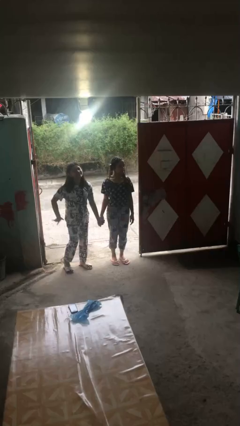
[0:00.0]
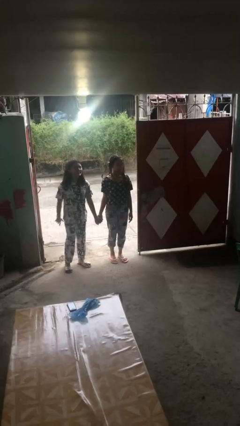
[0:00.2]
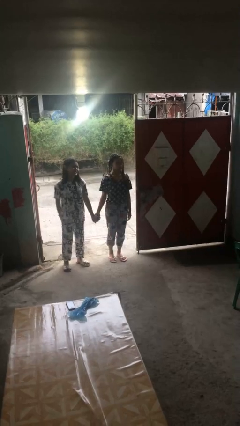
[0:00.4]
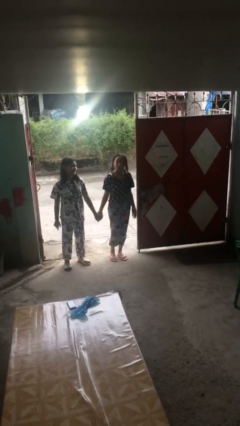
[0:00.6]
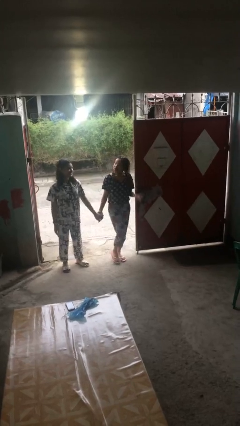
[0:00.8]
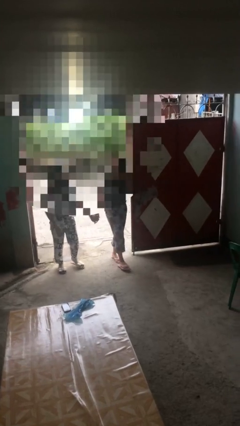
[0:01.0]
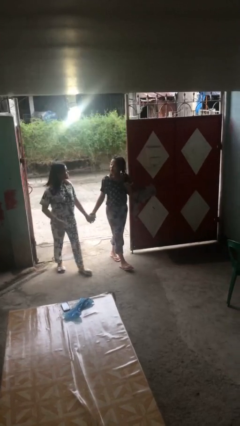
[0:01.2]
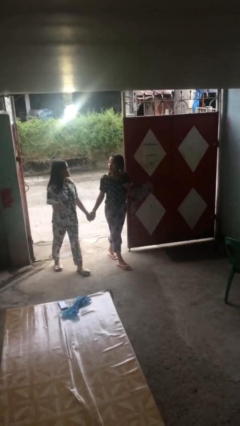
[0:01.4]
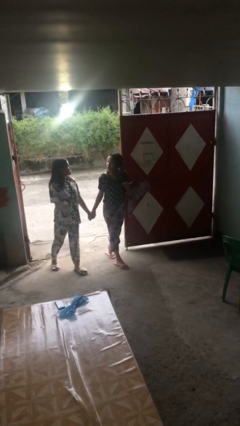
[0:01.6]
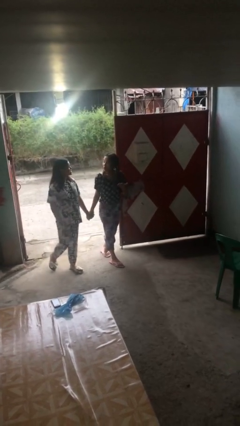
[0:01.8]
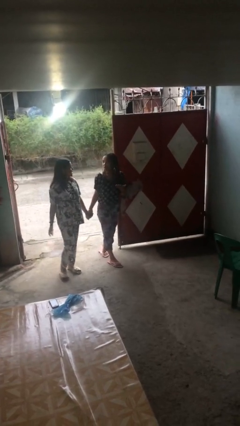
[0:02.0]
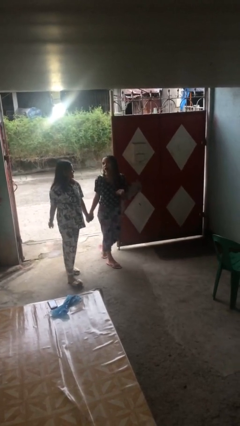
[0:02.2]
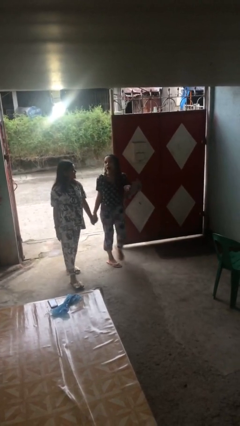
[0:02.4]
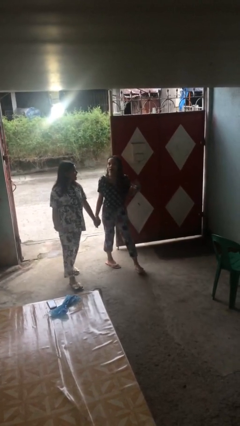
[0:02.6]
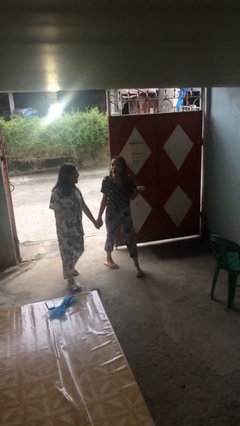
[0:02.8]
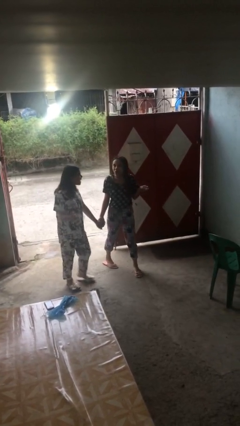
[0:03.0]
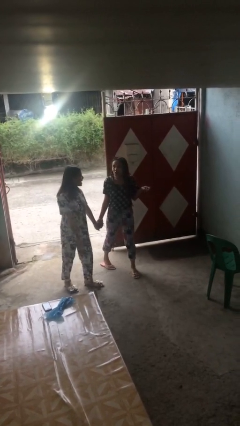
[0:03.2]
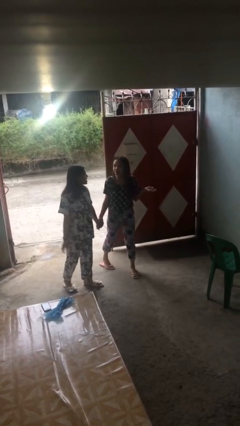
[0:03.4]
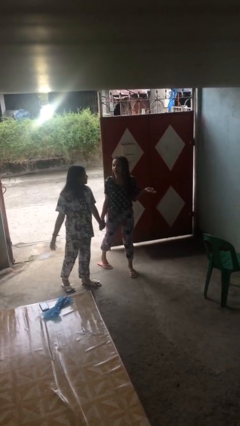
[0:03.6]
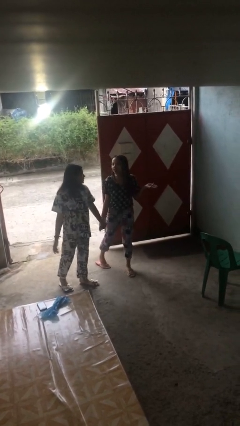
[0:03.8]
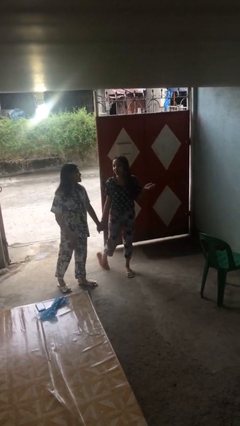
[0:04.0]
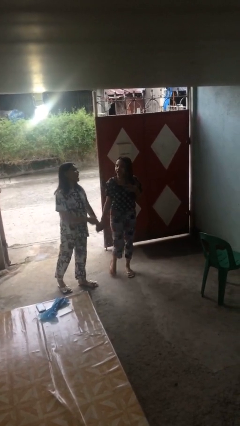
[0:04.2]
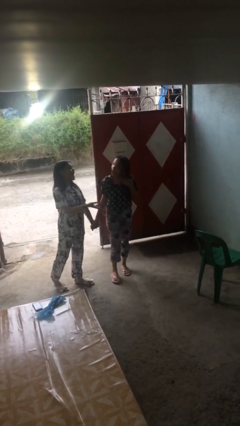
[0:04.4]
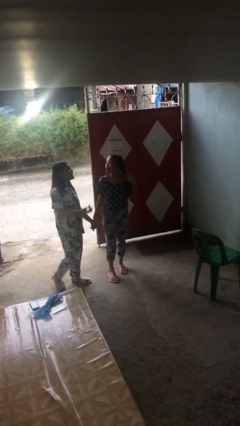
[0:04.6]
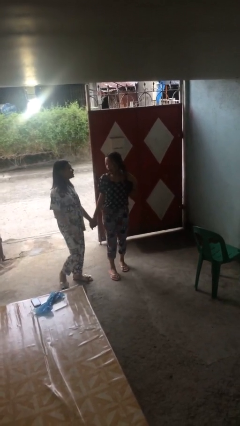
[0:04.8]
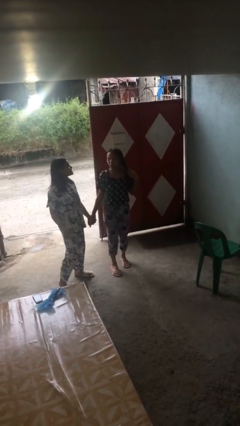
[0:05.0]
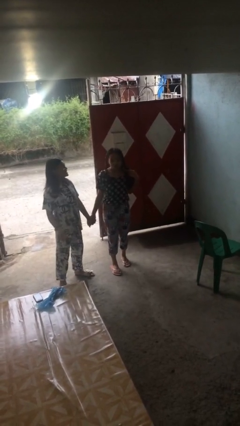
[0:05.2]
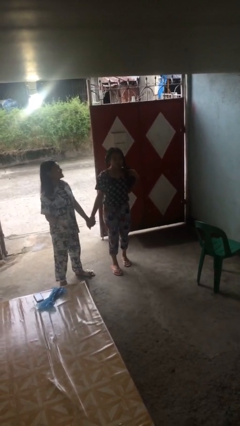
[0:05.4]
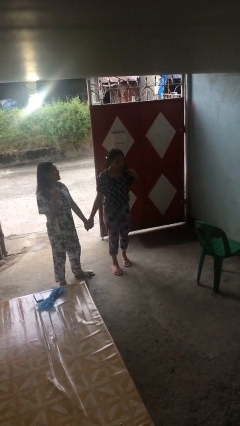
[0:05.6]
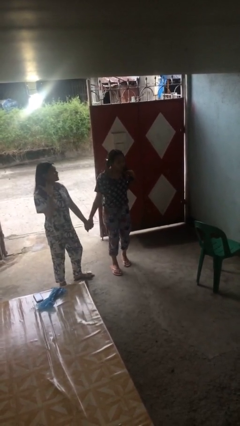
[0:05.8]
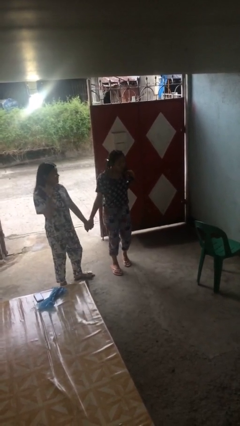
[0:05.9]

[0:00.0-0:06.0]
person holds hand

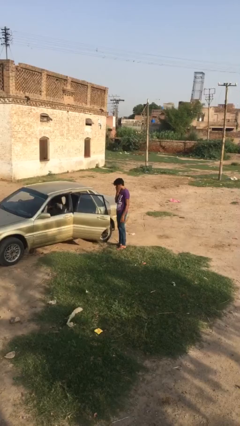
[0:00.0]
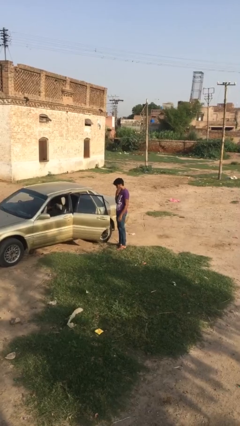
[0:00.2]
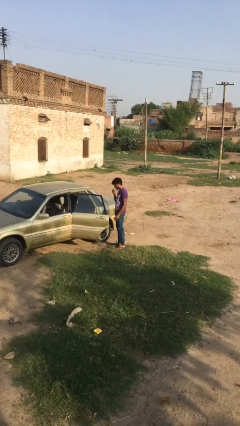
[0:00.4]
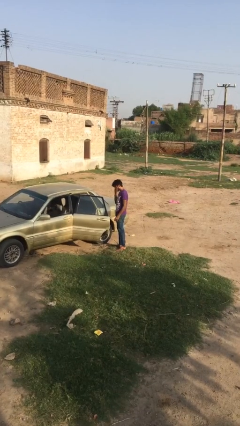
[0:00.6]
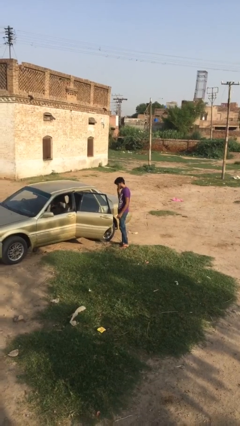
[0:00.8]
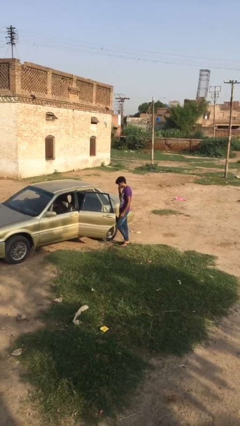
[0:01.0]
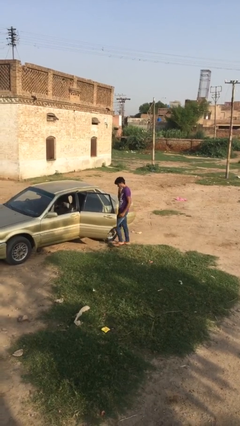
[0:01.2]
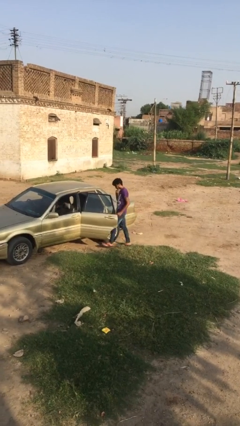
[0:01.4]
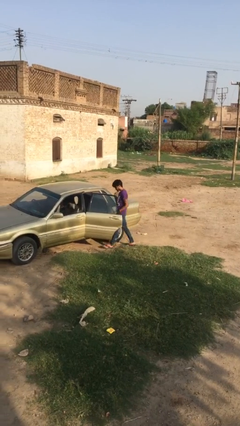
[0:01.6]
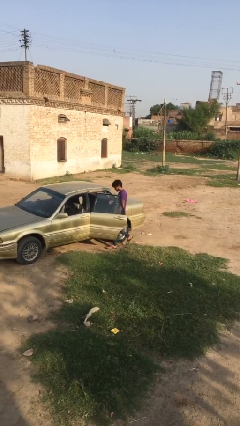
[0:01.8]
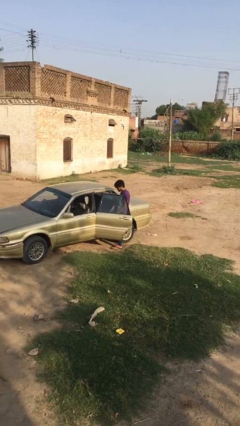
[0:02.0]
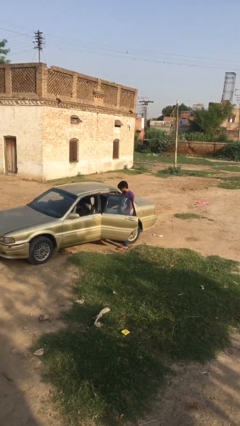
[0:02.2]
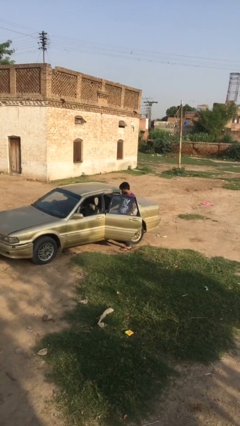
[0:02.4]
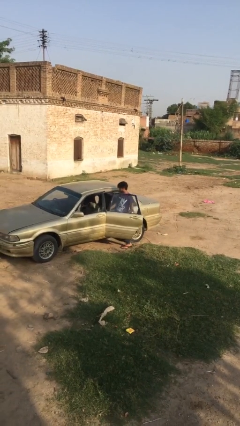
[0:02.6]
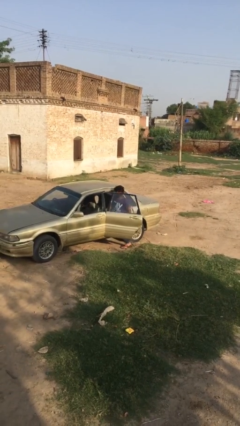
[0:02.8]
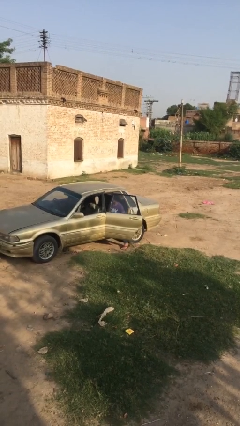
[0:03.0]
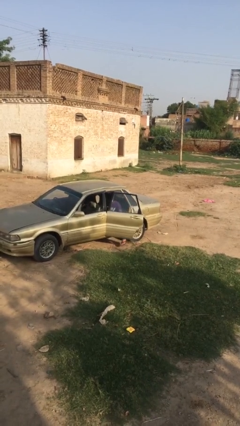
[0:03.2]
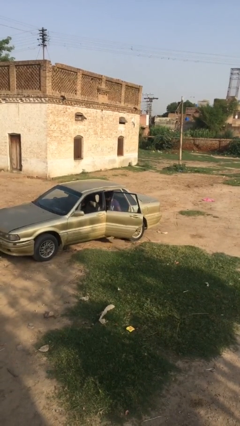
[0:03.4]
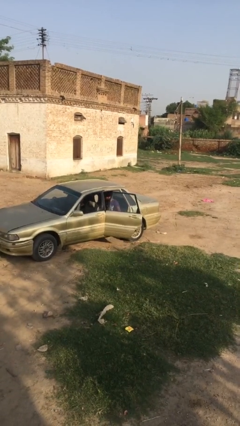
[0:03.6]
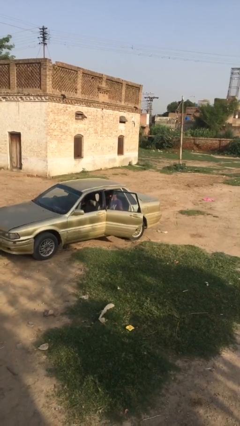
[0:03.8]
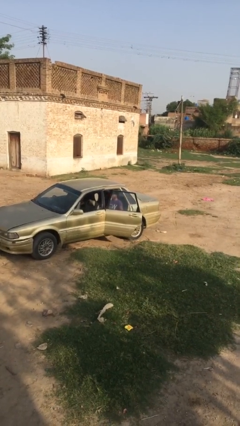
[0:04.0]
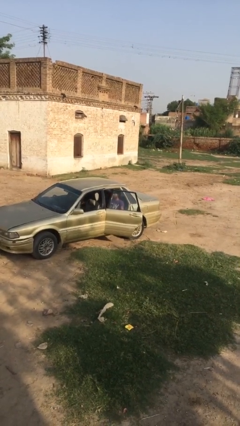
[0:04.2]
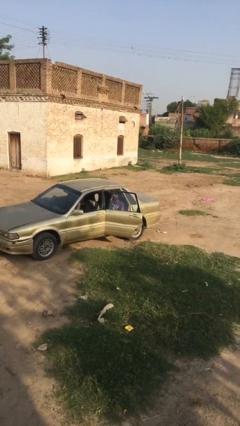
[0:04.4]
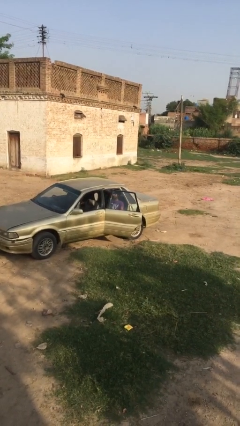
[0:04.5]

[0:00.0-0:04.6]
person enters car

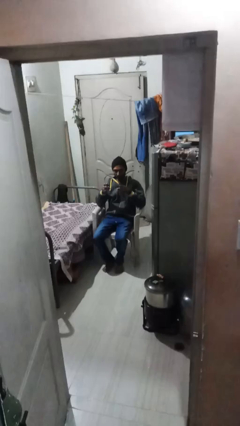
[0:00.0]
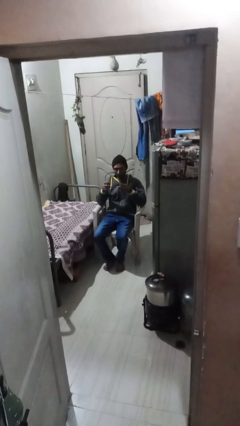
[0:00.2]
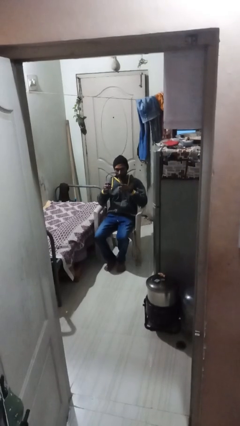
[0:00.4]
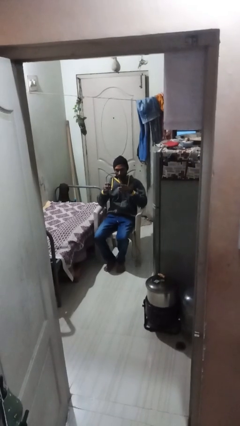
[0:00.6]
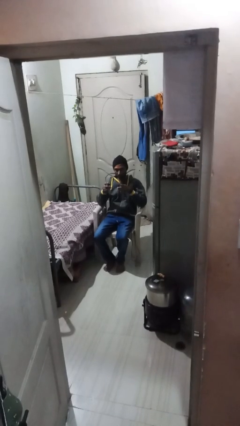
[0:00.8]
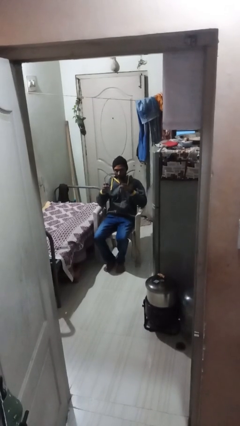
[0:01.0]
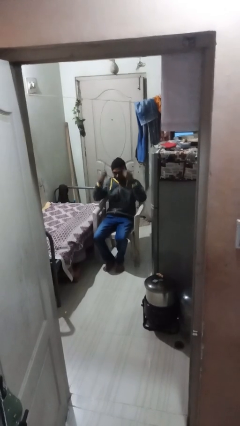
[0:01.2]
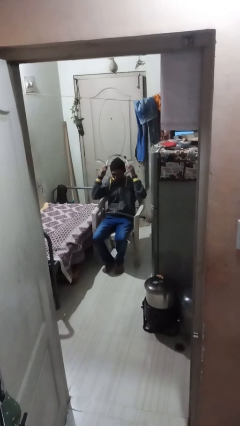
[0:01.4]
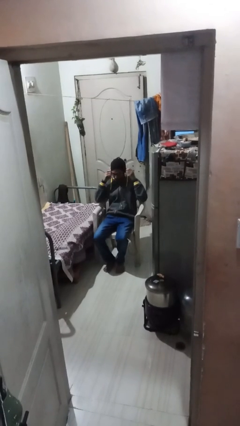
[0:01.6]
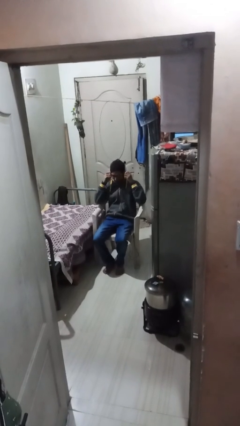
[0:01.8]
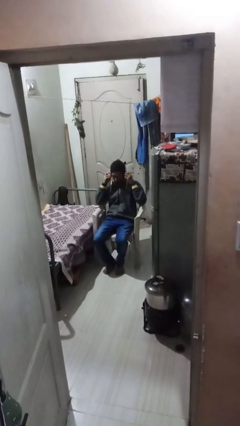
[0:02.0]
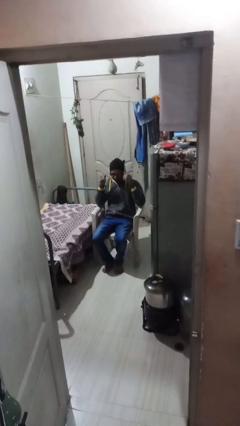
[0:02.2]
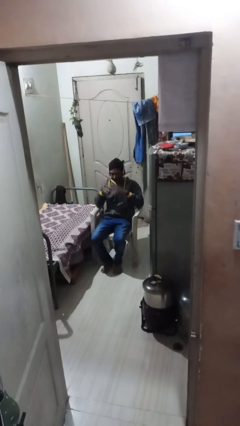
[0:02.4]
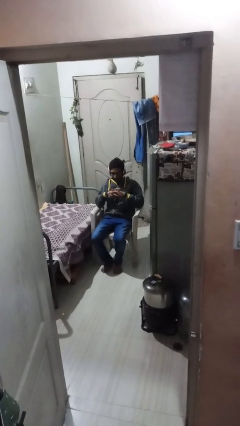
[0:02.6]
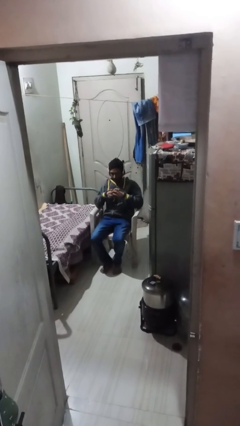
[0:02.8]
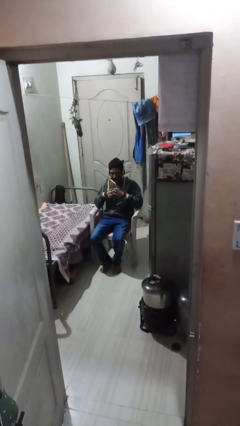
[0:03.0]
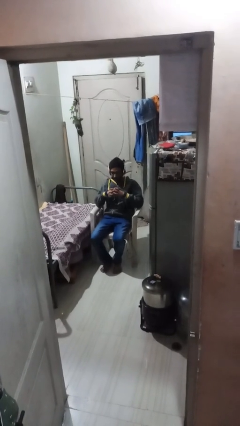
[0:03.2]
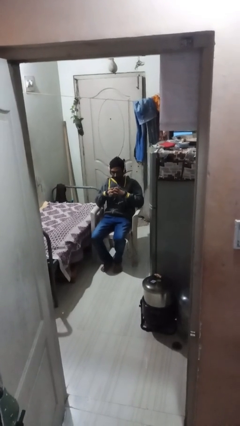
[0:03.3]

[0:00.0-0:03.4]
person puts on headphones

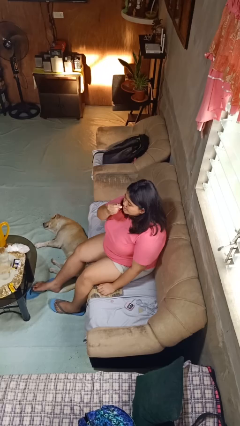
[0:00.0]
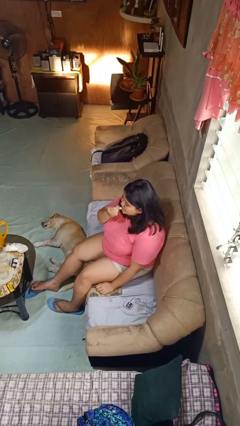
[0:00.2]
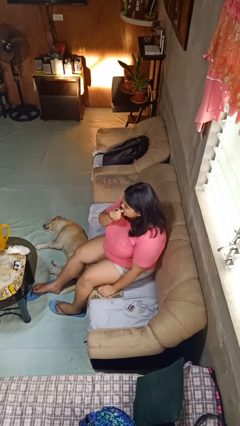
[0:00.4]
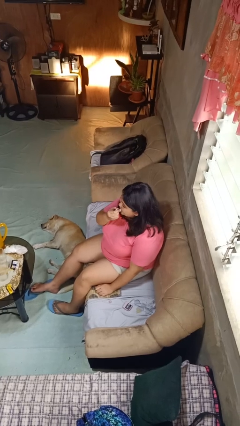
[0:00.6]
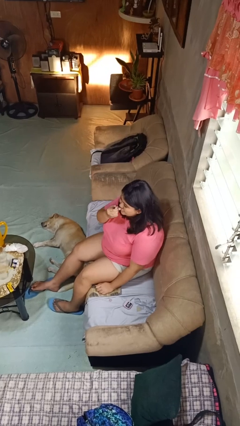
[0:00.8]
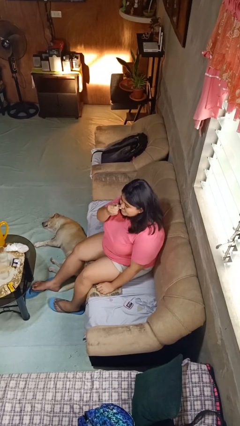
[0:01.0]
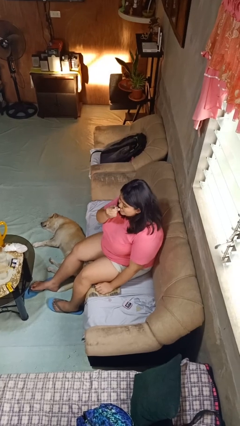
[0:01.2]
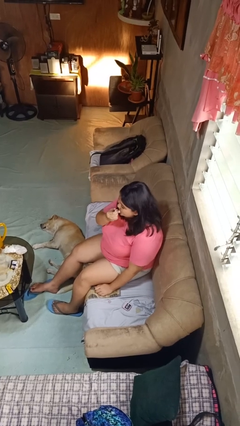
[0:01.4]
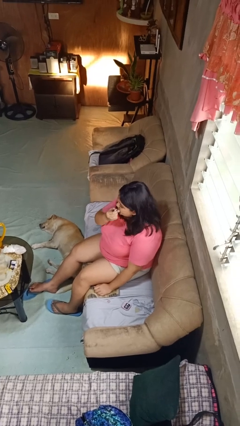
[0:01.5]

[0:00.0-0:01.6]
person applies lip makeup

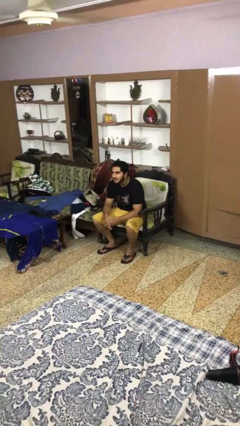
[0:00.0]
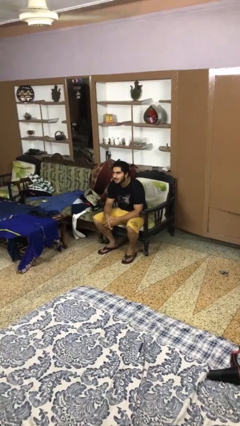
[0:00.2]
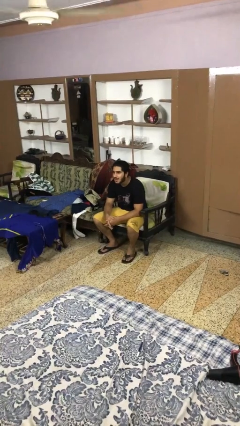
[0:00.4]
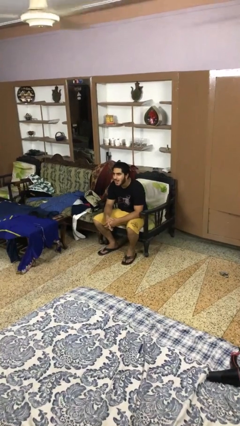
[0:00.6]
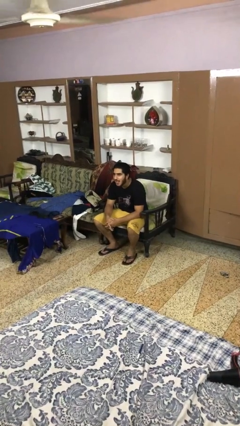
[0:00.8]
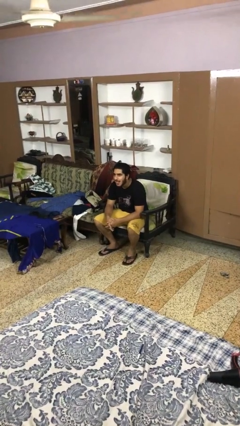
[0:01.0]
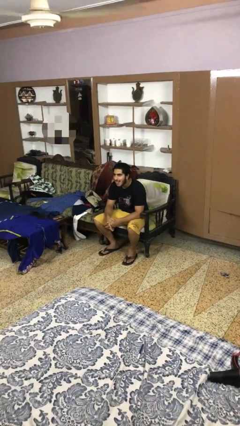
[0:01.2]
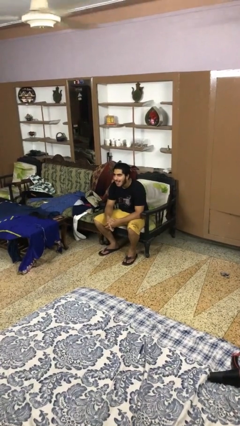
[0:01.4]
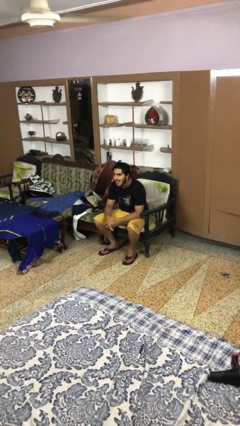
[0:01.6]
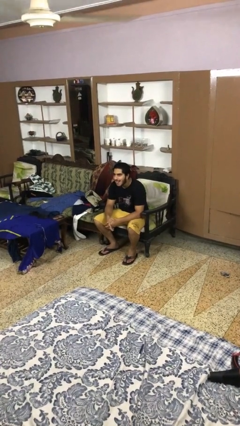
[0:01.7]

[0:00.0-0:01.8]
person sticks out tongue
